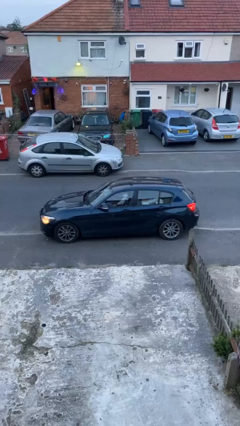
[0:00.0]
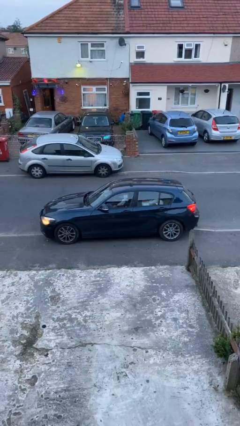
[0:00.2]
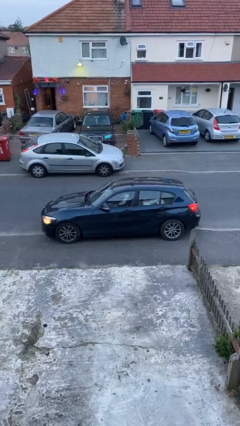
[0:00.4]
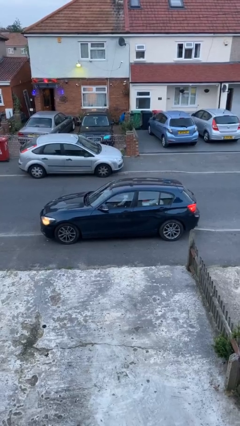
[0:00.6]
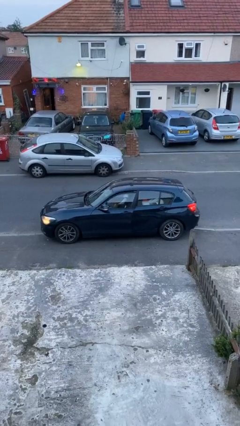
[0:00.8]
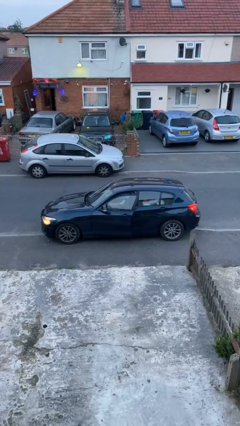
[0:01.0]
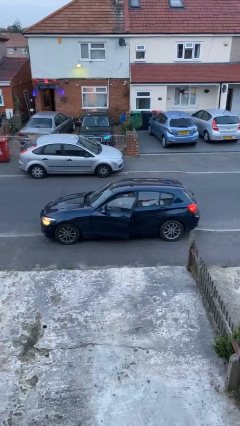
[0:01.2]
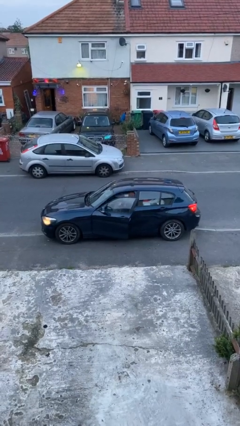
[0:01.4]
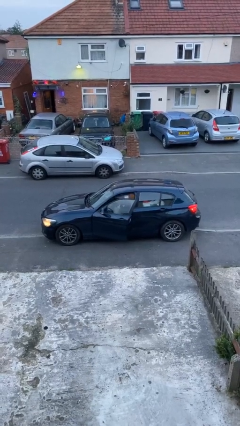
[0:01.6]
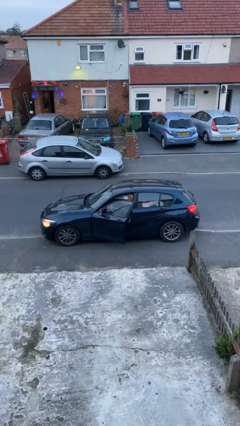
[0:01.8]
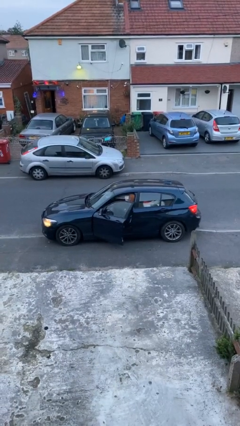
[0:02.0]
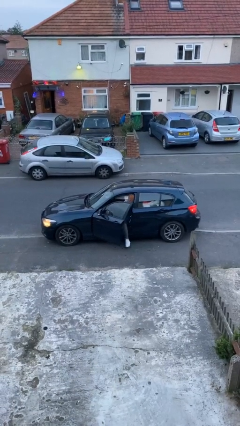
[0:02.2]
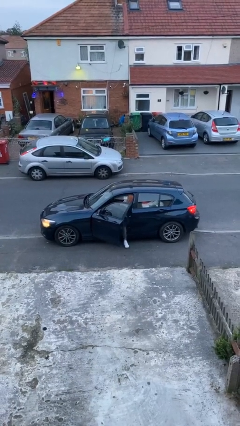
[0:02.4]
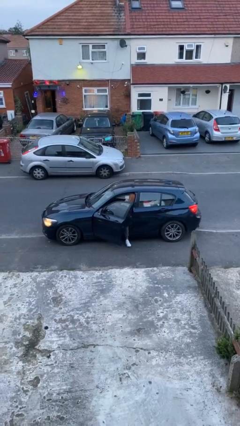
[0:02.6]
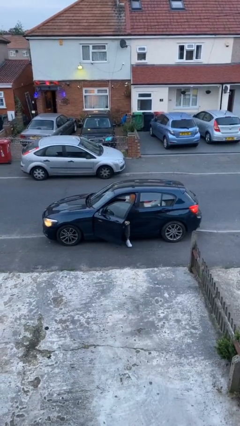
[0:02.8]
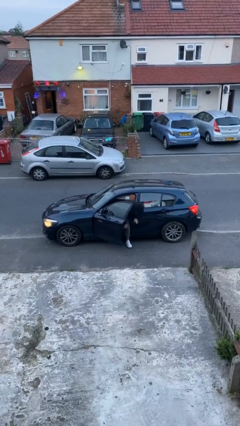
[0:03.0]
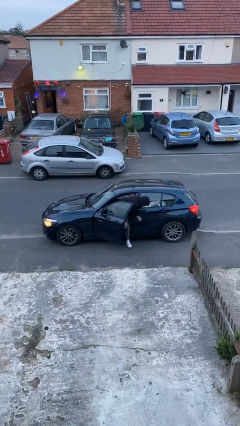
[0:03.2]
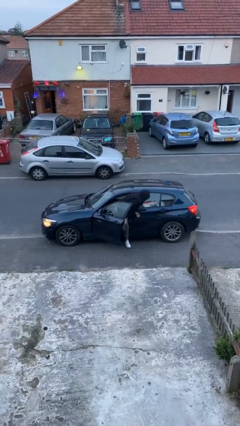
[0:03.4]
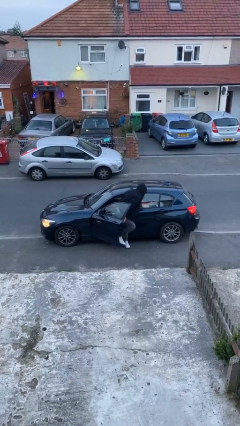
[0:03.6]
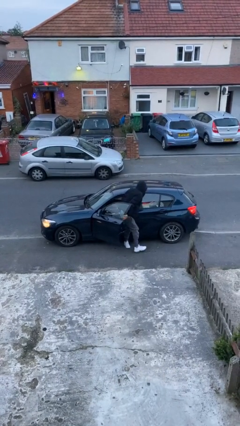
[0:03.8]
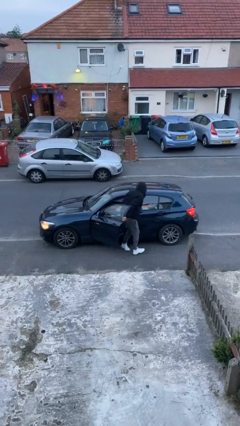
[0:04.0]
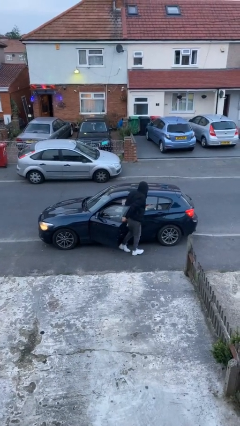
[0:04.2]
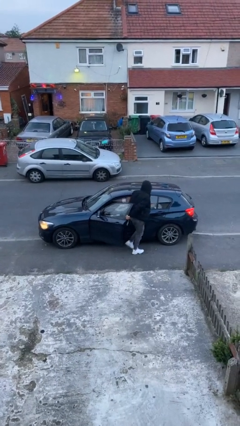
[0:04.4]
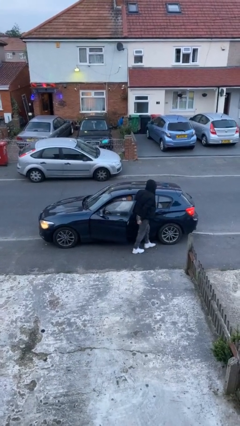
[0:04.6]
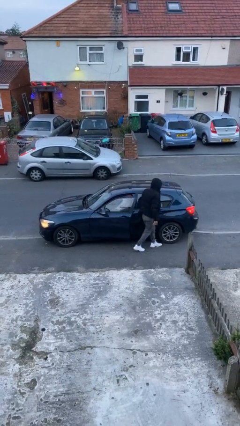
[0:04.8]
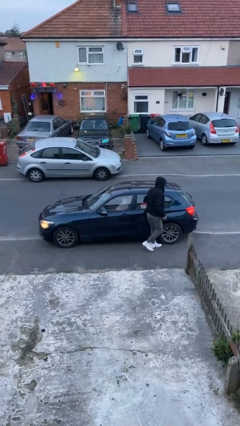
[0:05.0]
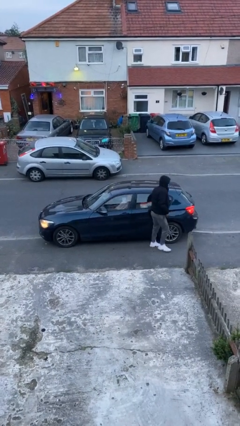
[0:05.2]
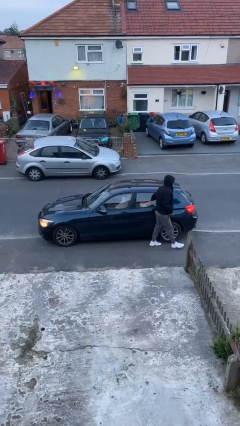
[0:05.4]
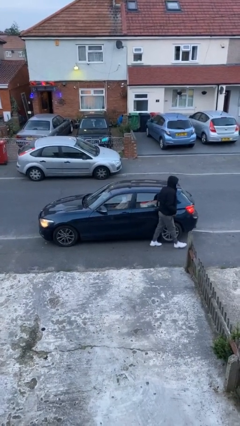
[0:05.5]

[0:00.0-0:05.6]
car drops off person

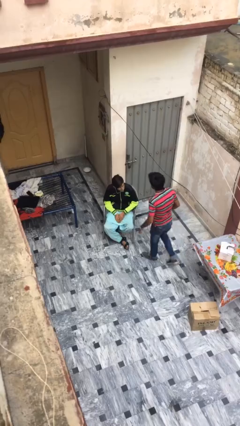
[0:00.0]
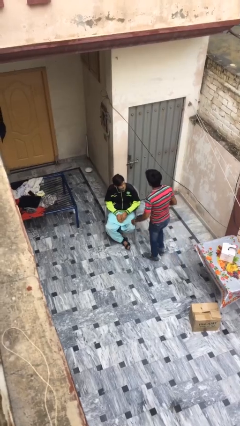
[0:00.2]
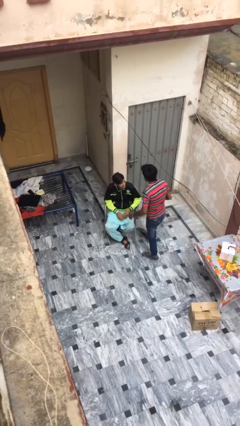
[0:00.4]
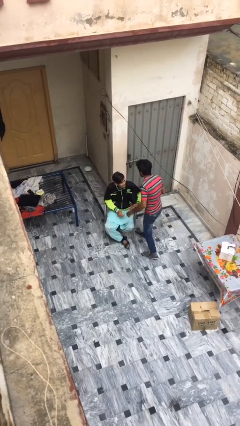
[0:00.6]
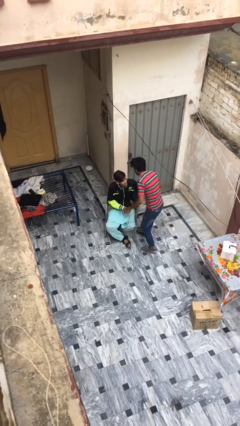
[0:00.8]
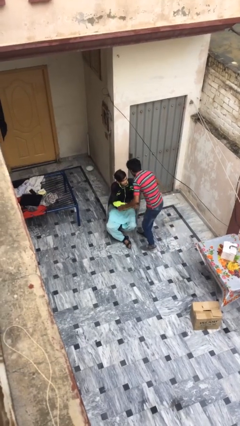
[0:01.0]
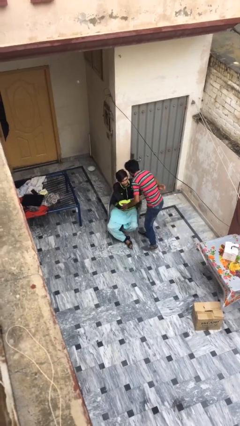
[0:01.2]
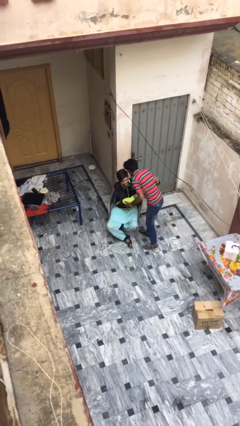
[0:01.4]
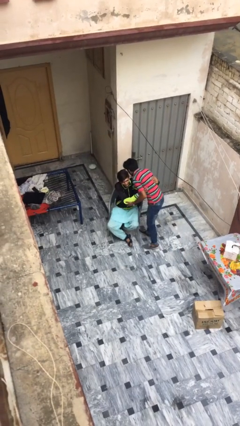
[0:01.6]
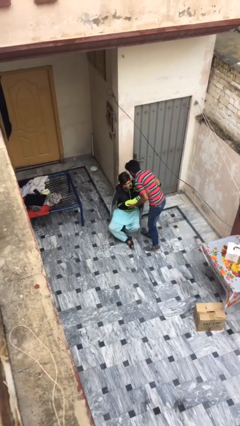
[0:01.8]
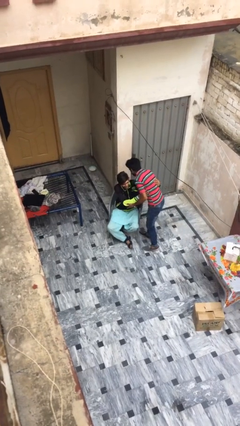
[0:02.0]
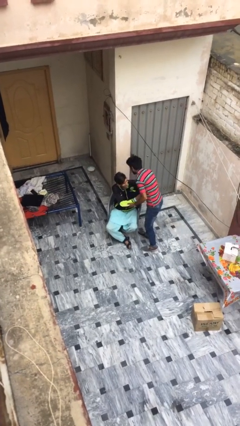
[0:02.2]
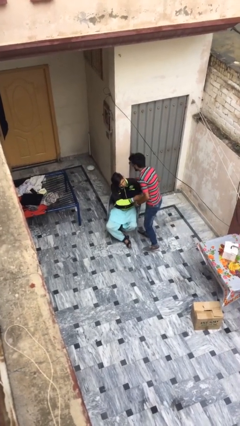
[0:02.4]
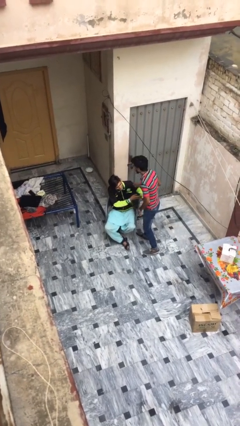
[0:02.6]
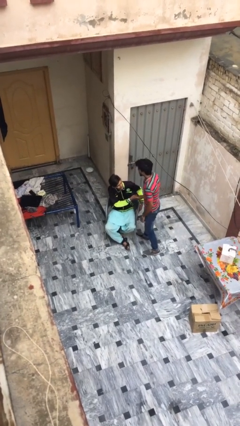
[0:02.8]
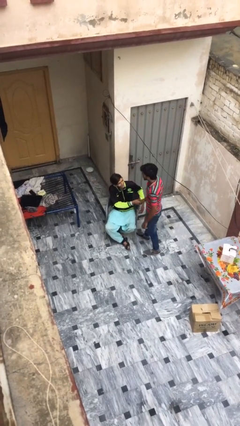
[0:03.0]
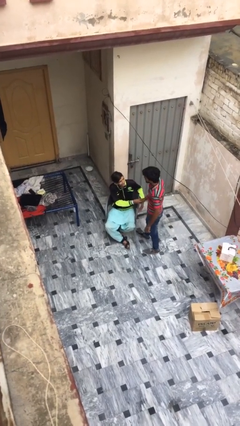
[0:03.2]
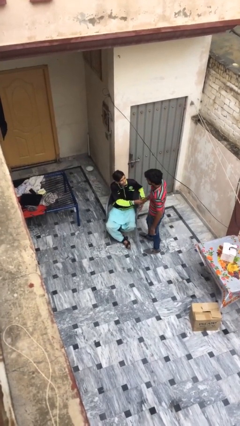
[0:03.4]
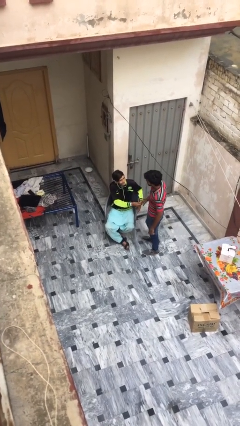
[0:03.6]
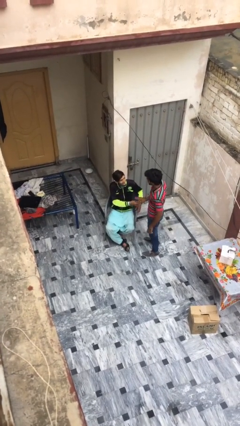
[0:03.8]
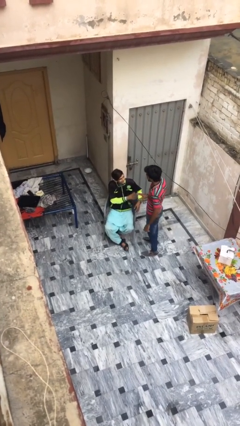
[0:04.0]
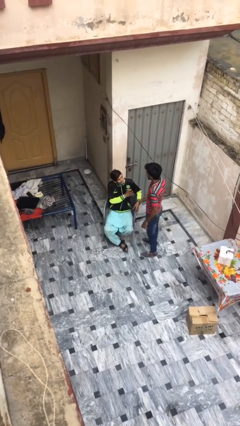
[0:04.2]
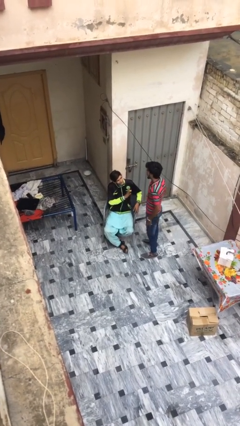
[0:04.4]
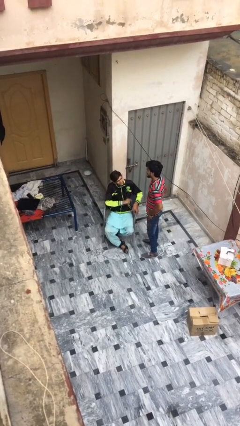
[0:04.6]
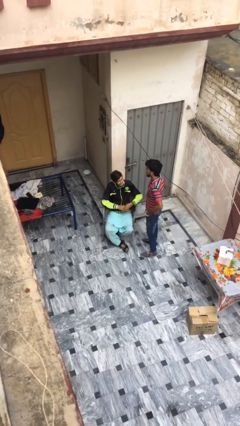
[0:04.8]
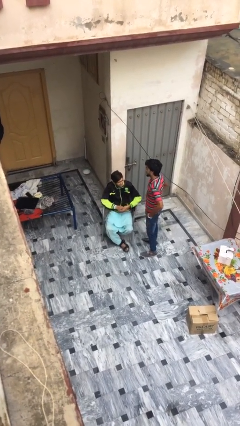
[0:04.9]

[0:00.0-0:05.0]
person embraces person

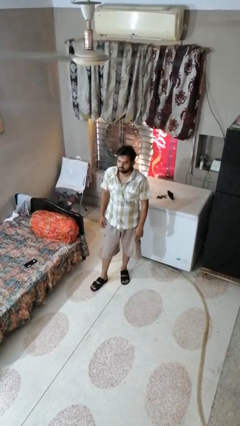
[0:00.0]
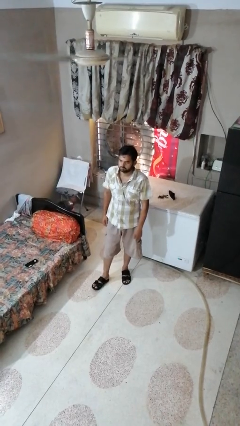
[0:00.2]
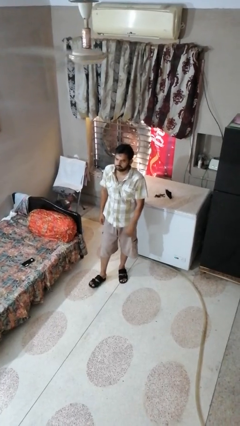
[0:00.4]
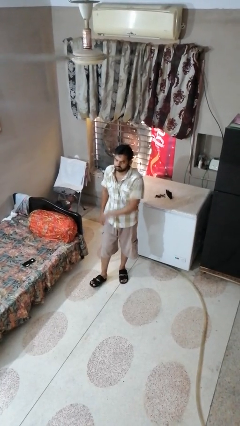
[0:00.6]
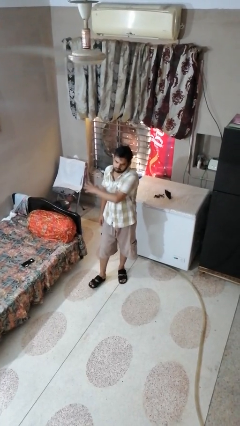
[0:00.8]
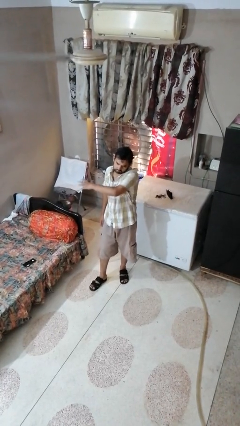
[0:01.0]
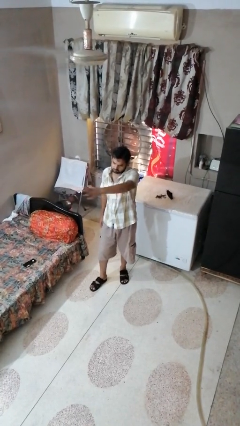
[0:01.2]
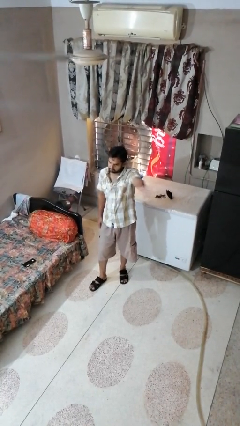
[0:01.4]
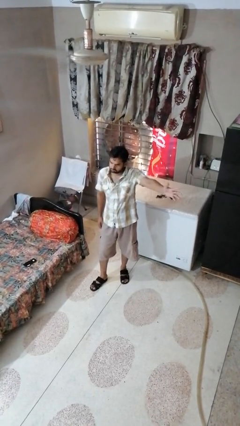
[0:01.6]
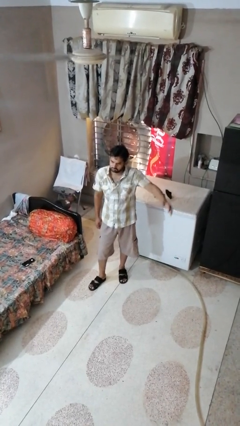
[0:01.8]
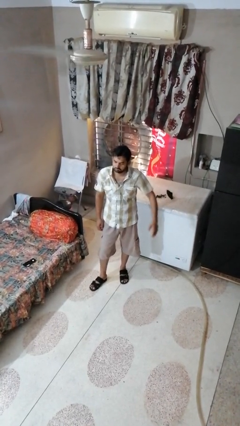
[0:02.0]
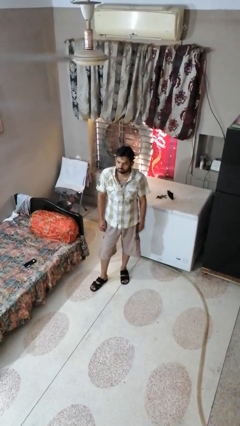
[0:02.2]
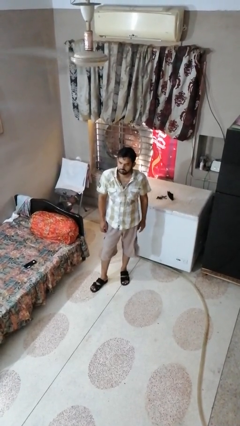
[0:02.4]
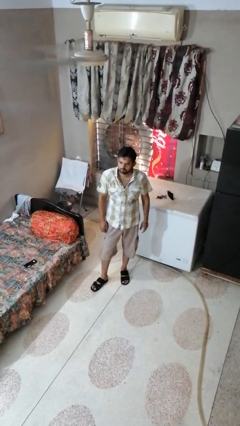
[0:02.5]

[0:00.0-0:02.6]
person gestures swipe left

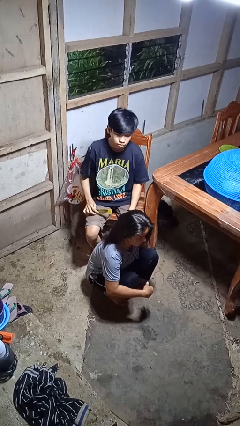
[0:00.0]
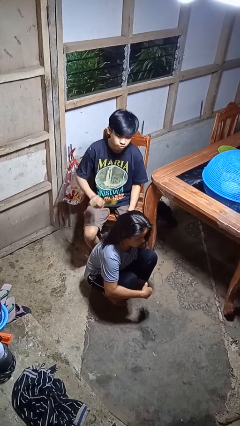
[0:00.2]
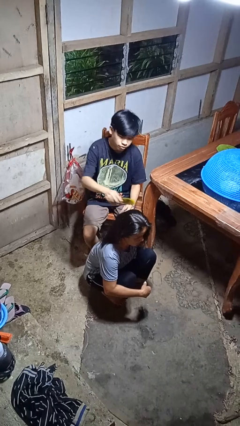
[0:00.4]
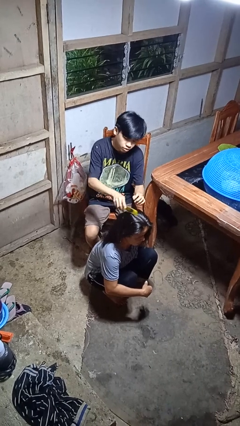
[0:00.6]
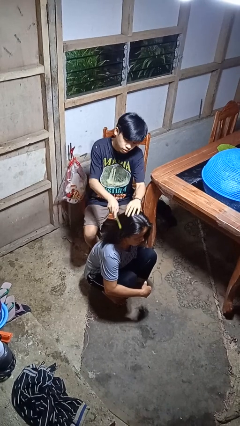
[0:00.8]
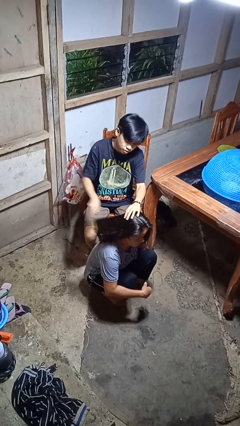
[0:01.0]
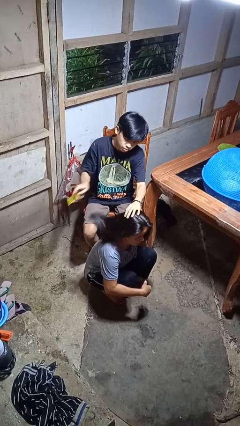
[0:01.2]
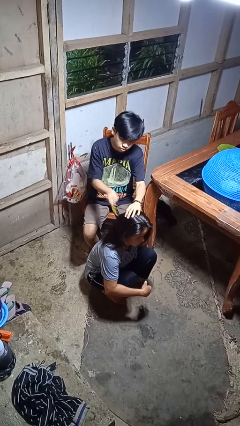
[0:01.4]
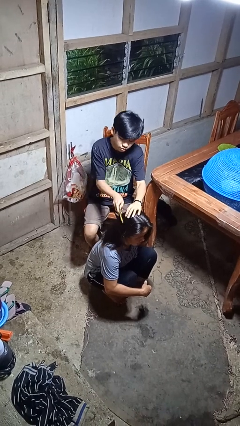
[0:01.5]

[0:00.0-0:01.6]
person brushes hair of person

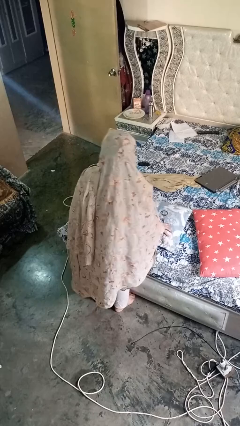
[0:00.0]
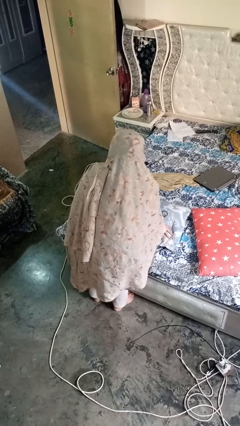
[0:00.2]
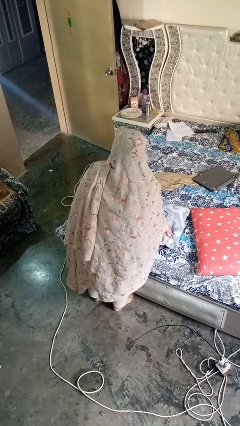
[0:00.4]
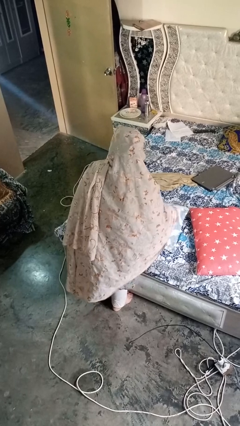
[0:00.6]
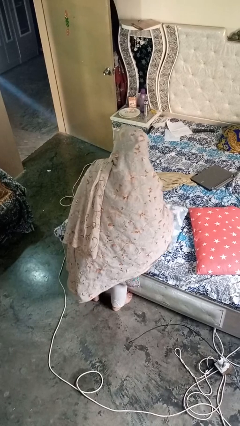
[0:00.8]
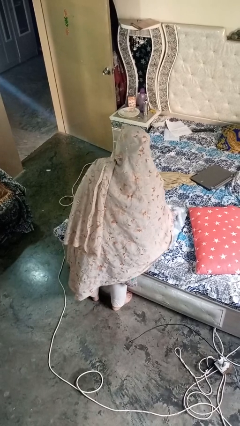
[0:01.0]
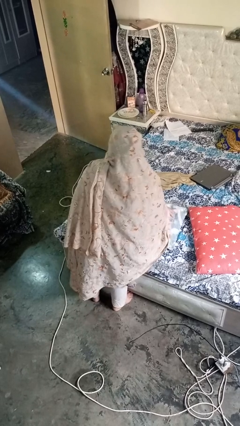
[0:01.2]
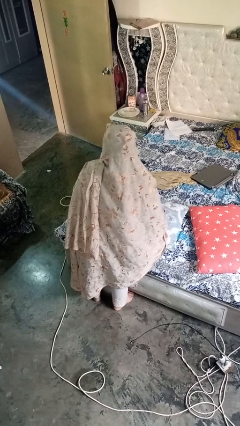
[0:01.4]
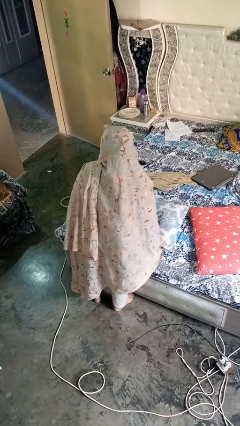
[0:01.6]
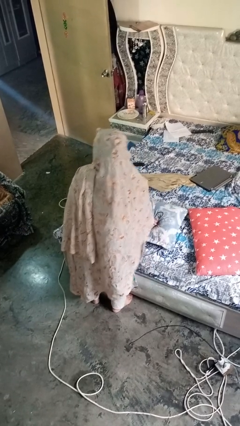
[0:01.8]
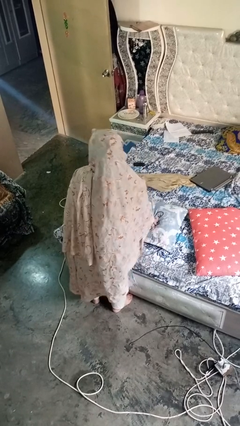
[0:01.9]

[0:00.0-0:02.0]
person taps object with finger

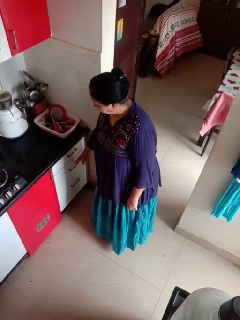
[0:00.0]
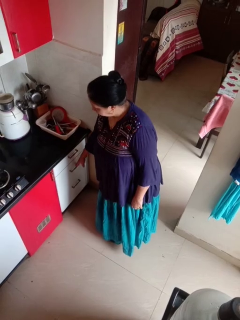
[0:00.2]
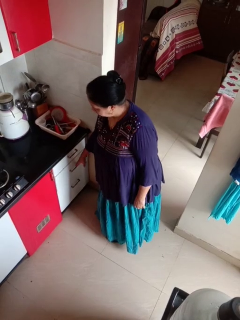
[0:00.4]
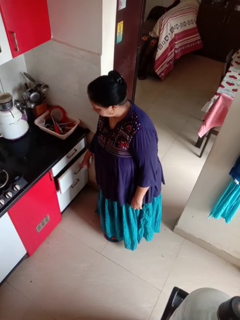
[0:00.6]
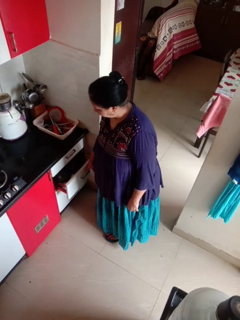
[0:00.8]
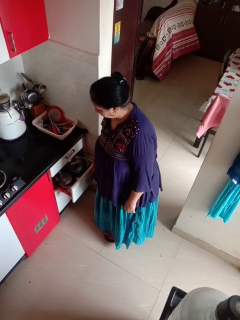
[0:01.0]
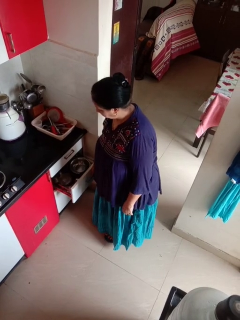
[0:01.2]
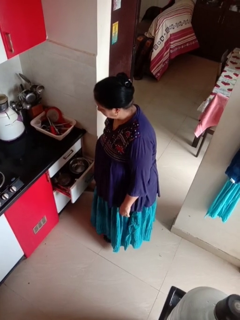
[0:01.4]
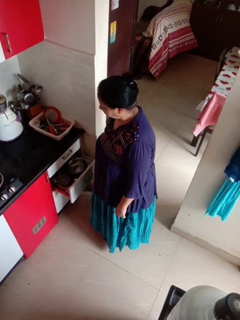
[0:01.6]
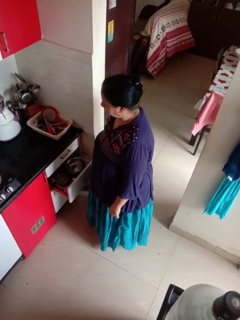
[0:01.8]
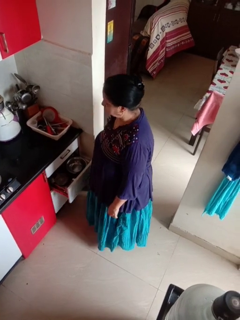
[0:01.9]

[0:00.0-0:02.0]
person opens kitchen drawer
